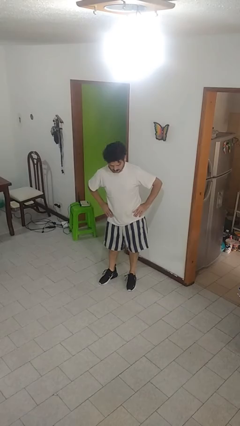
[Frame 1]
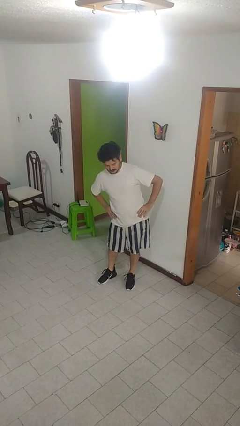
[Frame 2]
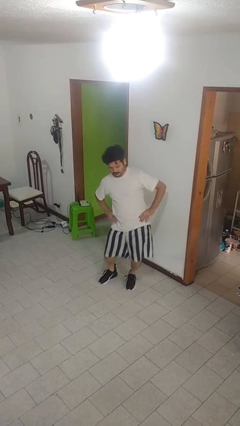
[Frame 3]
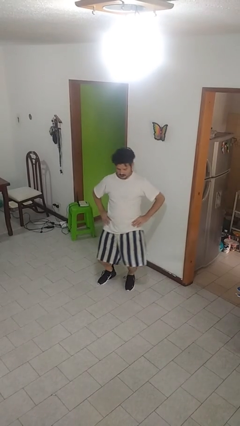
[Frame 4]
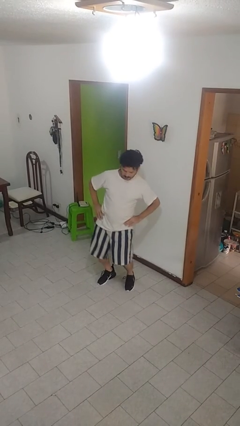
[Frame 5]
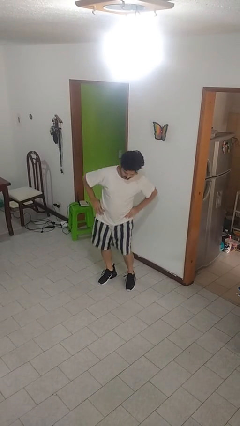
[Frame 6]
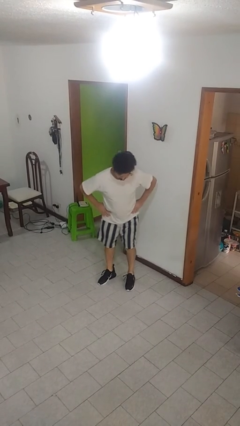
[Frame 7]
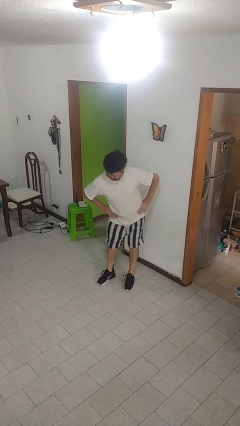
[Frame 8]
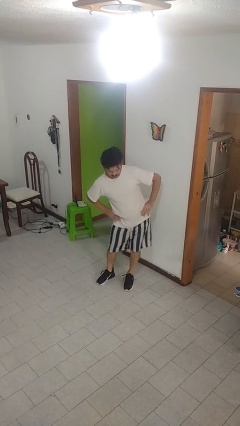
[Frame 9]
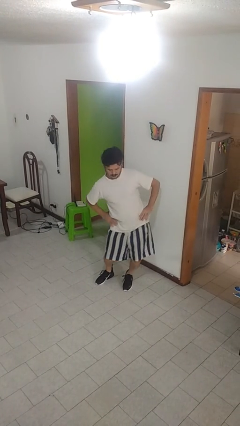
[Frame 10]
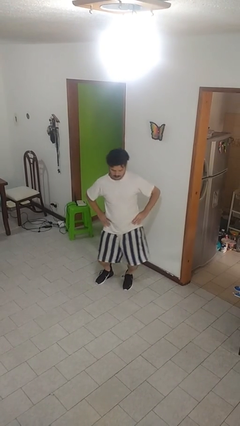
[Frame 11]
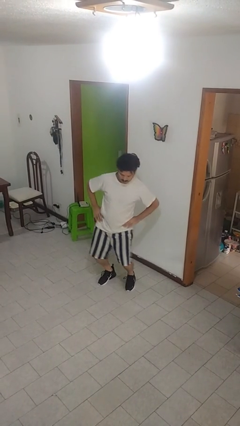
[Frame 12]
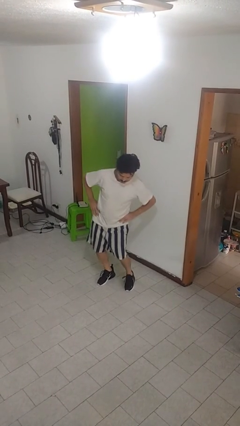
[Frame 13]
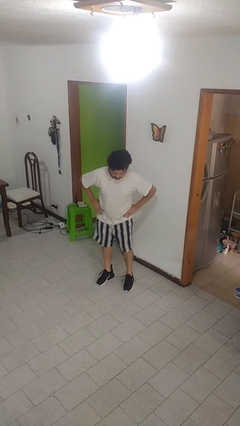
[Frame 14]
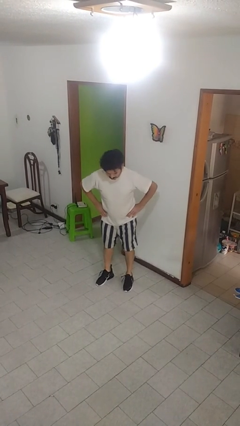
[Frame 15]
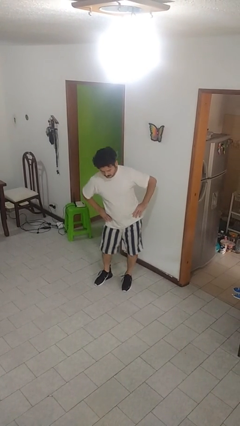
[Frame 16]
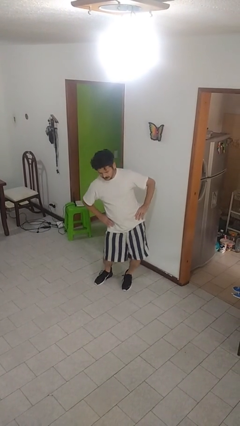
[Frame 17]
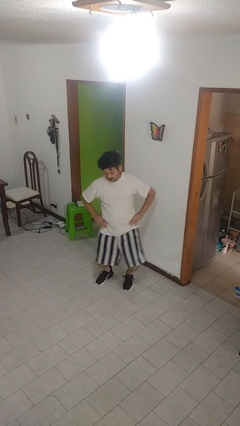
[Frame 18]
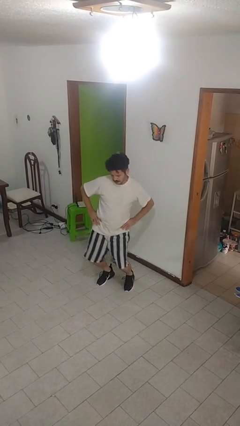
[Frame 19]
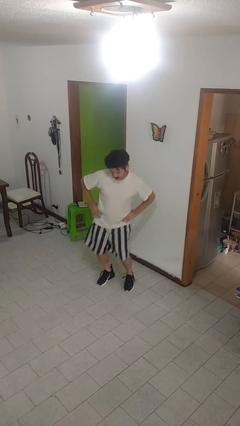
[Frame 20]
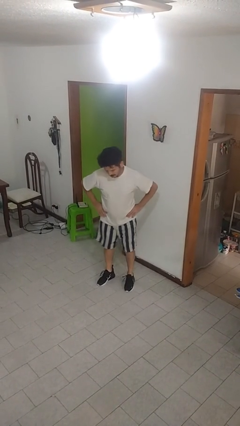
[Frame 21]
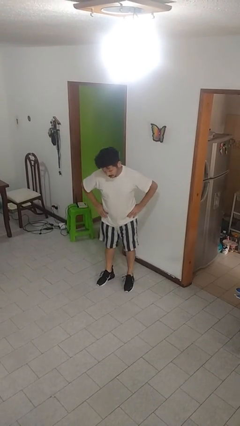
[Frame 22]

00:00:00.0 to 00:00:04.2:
person wiggles hips

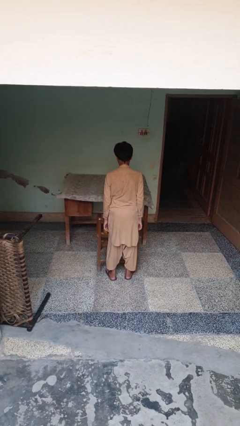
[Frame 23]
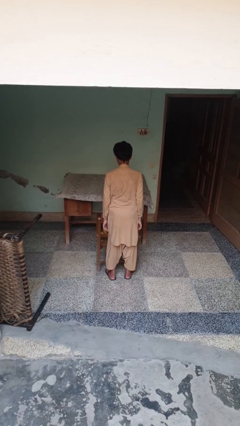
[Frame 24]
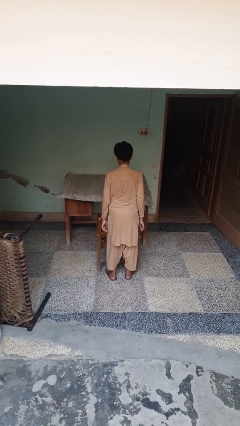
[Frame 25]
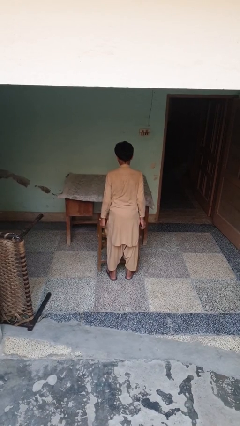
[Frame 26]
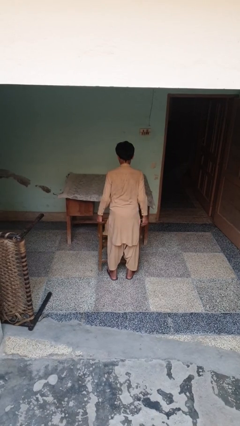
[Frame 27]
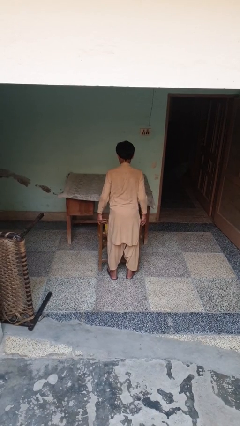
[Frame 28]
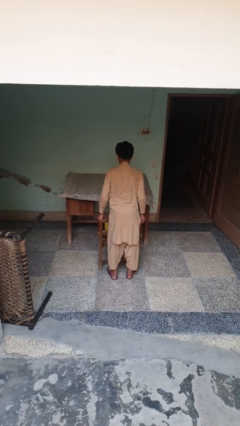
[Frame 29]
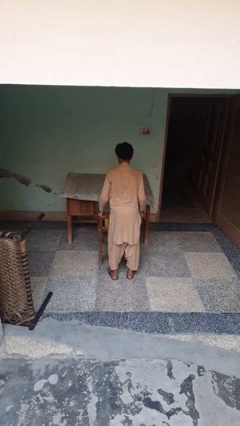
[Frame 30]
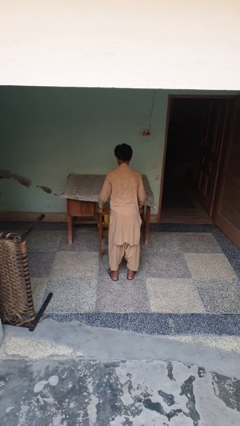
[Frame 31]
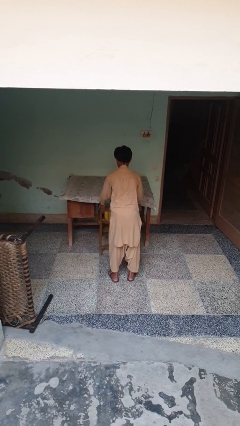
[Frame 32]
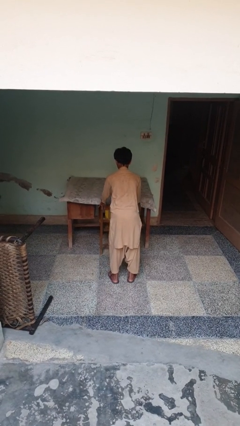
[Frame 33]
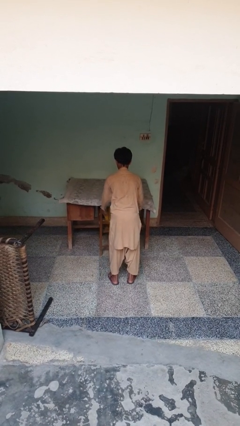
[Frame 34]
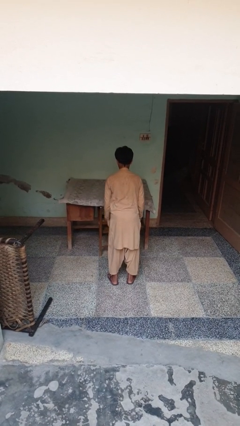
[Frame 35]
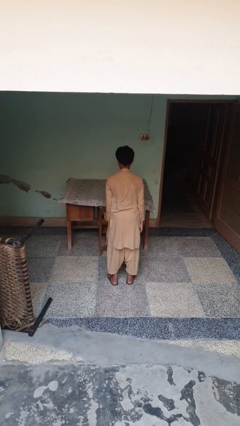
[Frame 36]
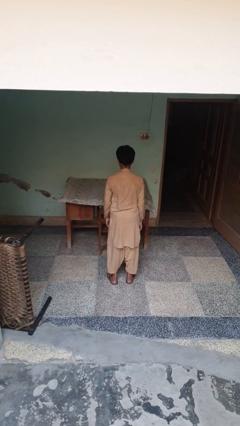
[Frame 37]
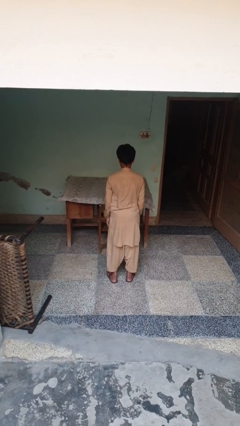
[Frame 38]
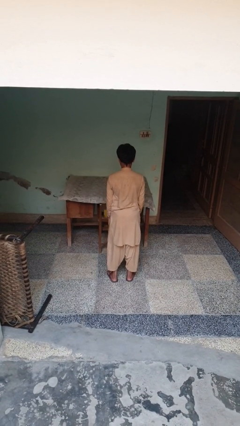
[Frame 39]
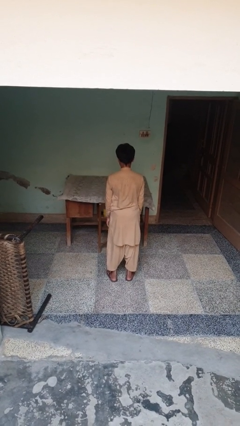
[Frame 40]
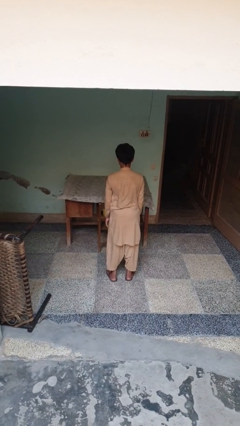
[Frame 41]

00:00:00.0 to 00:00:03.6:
person pushes in chair

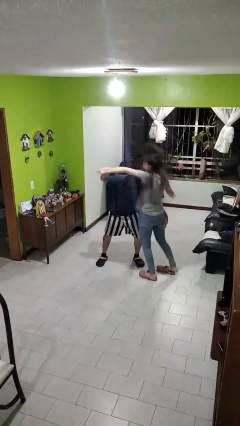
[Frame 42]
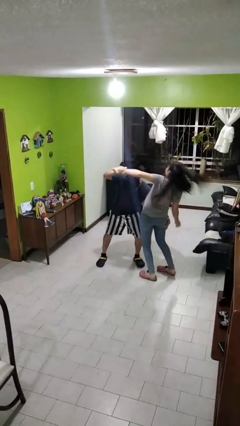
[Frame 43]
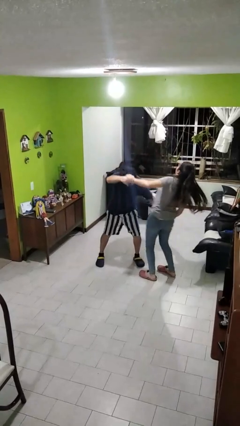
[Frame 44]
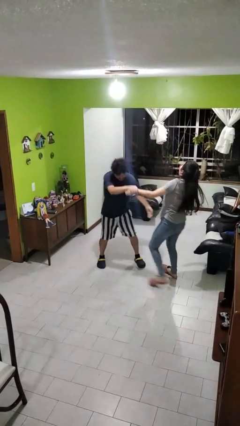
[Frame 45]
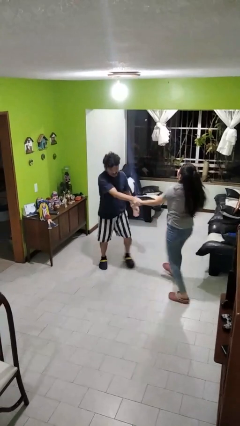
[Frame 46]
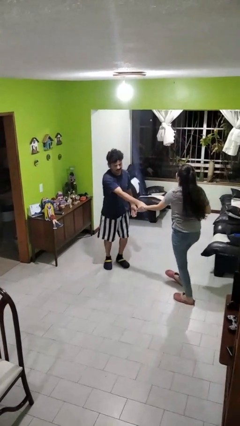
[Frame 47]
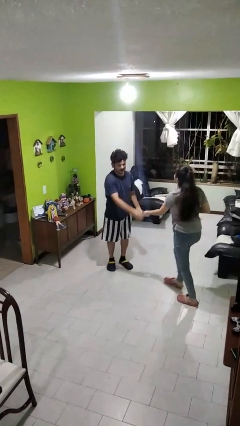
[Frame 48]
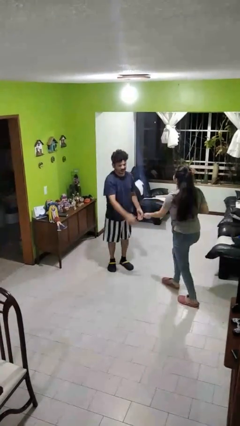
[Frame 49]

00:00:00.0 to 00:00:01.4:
person puts down person

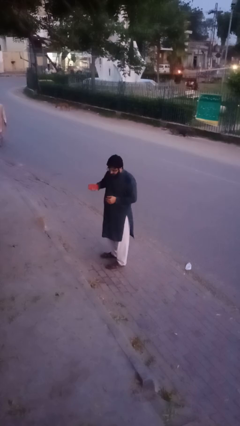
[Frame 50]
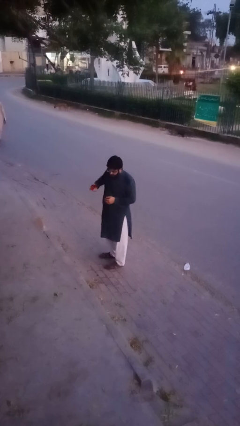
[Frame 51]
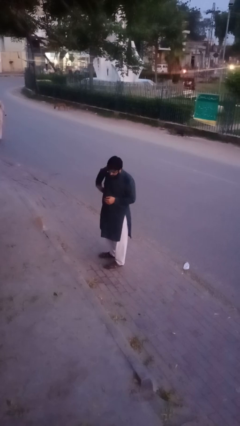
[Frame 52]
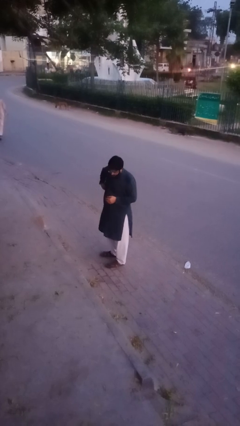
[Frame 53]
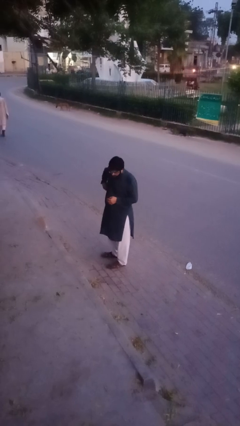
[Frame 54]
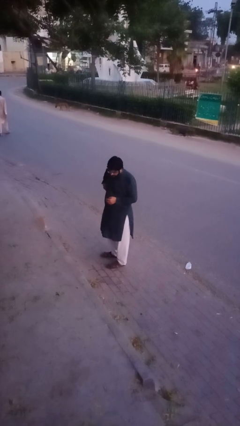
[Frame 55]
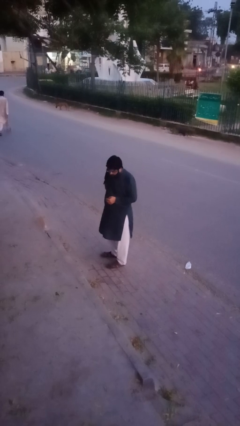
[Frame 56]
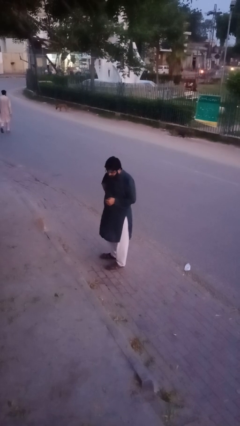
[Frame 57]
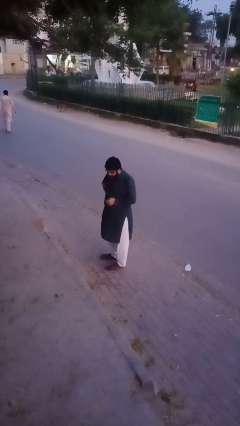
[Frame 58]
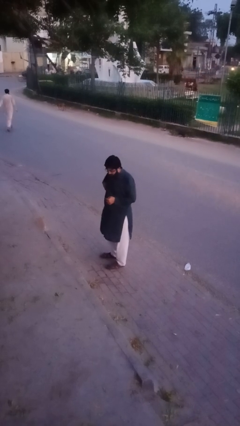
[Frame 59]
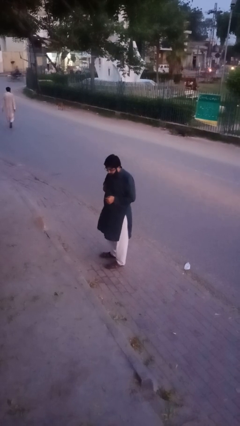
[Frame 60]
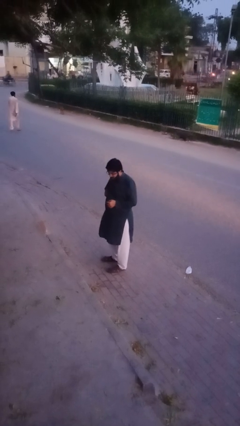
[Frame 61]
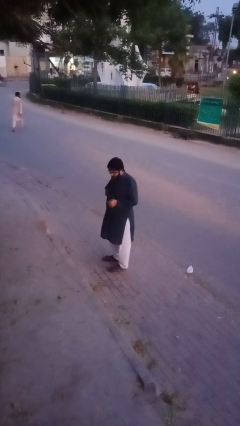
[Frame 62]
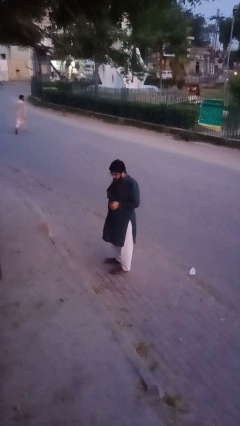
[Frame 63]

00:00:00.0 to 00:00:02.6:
person puts phone into pocket

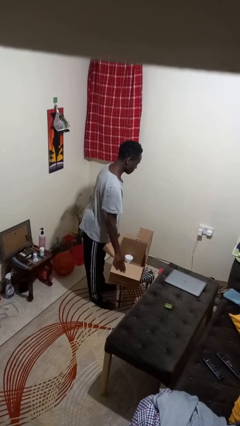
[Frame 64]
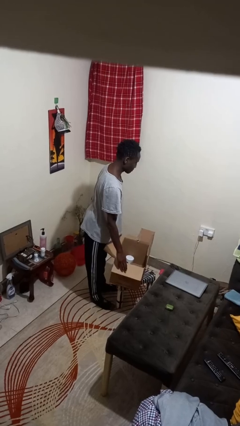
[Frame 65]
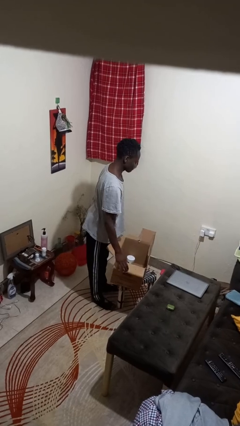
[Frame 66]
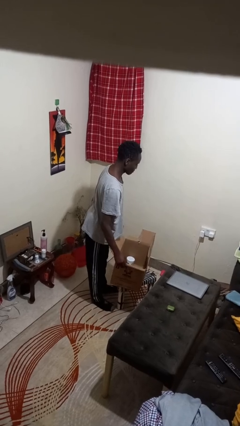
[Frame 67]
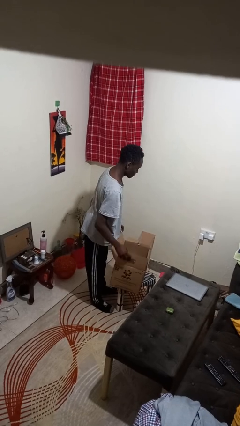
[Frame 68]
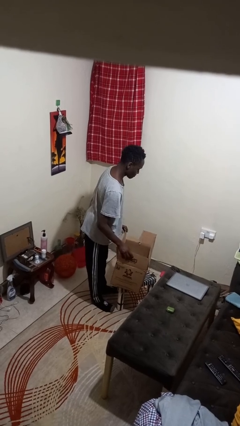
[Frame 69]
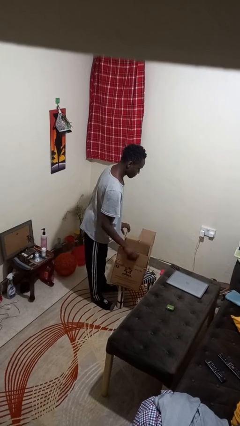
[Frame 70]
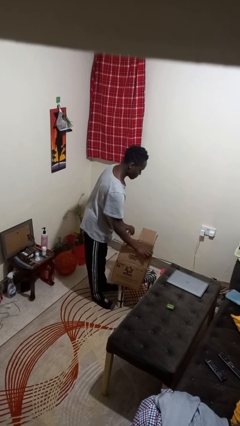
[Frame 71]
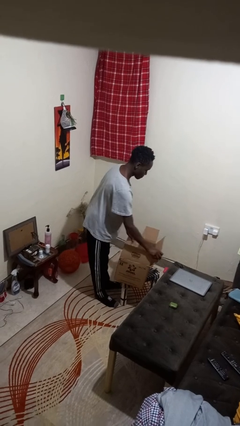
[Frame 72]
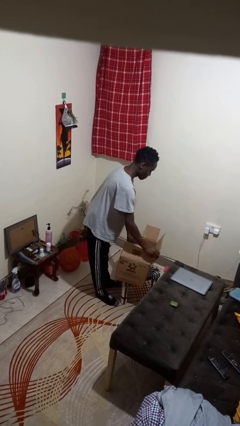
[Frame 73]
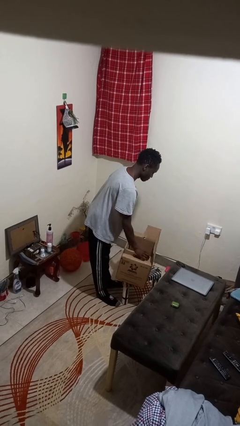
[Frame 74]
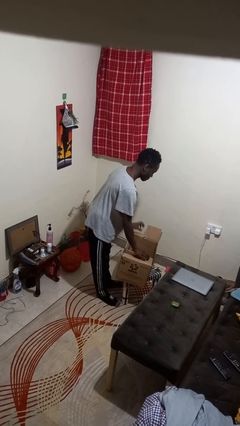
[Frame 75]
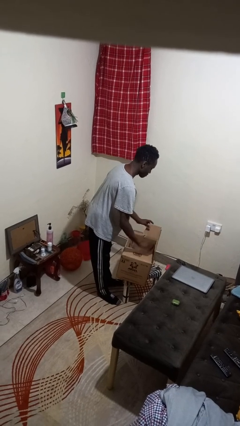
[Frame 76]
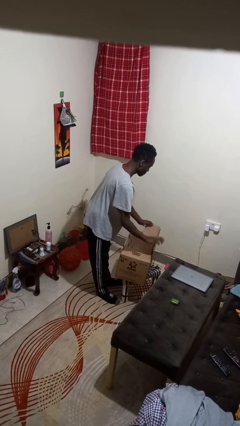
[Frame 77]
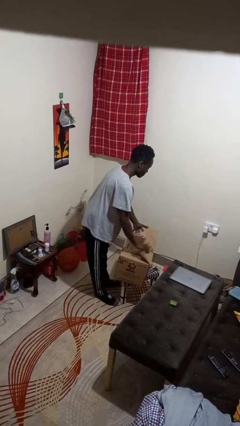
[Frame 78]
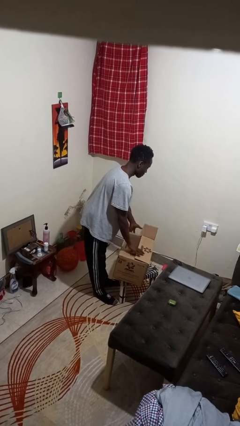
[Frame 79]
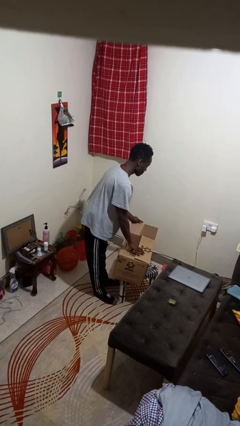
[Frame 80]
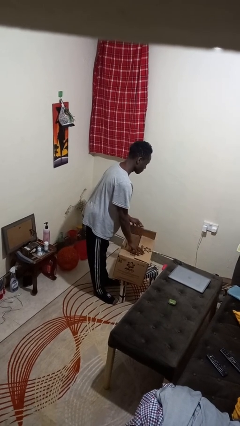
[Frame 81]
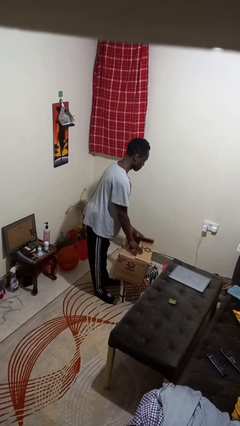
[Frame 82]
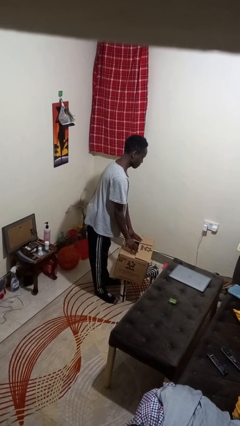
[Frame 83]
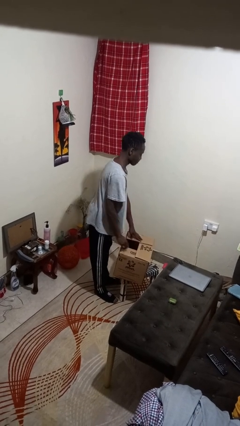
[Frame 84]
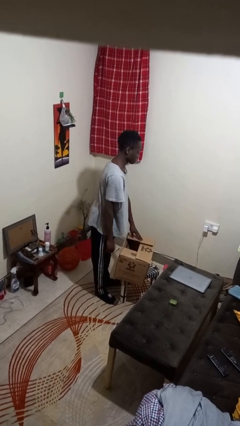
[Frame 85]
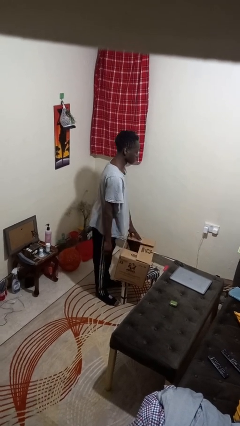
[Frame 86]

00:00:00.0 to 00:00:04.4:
person closes box

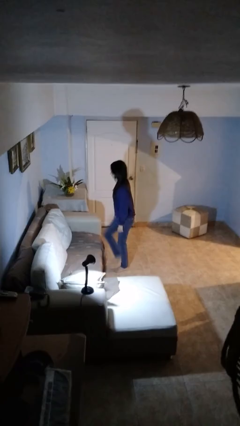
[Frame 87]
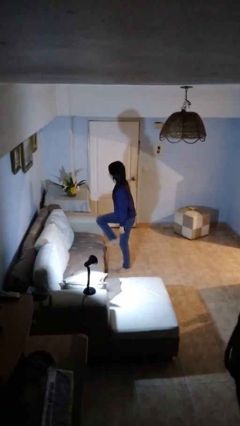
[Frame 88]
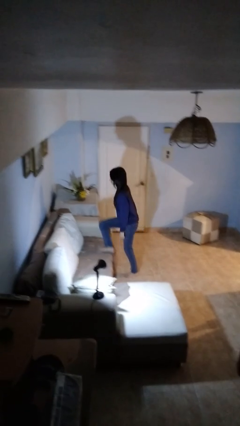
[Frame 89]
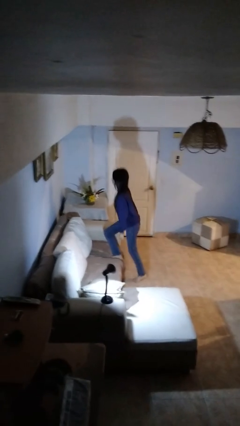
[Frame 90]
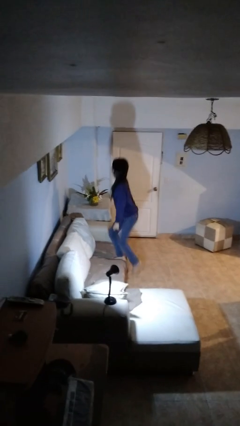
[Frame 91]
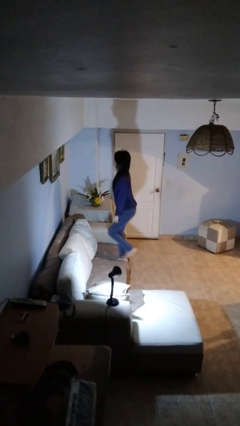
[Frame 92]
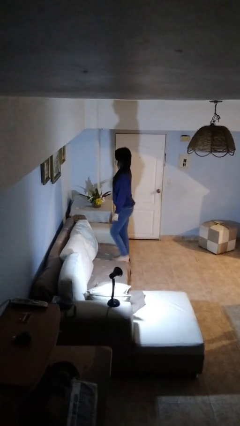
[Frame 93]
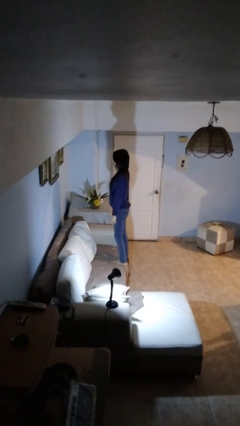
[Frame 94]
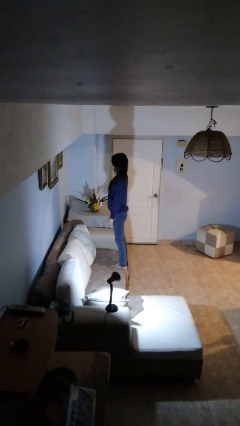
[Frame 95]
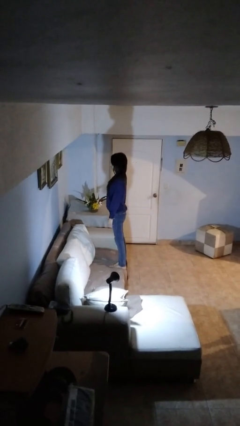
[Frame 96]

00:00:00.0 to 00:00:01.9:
person climbs on couch
